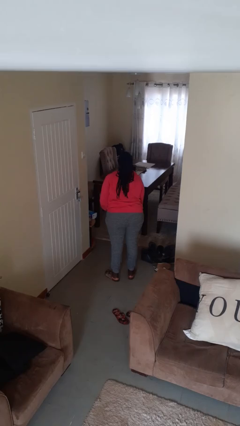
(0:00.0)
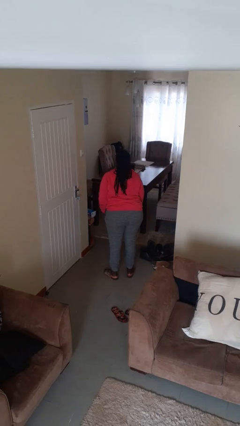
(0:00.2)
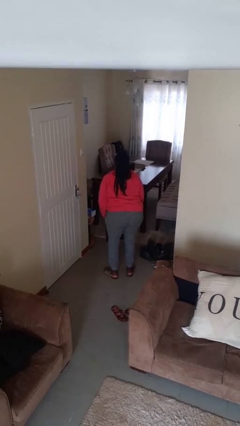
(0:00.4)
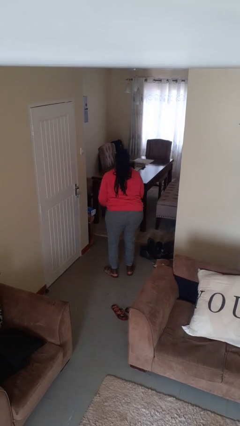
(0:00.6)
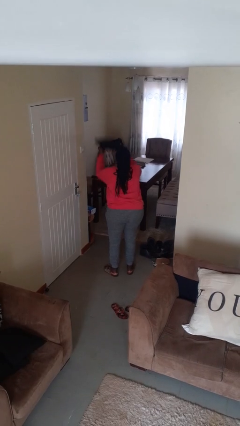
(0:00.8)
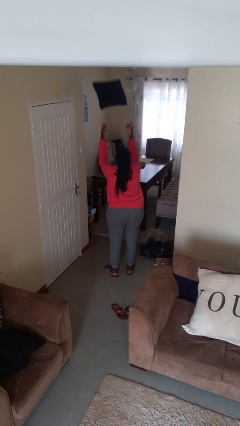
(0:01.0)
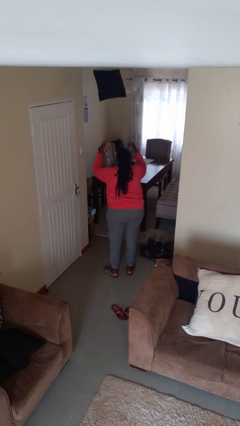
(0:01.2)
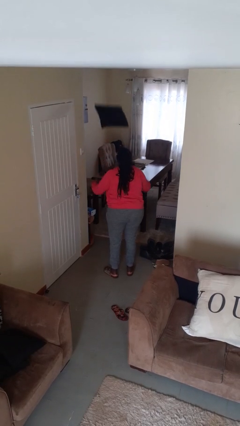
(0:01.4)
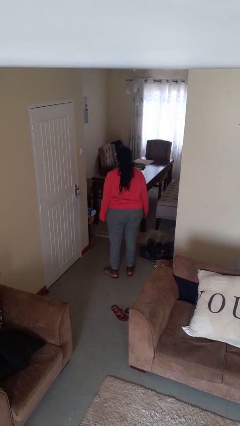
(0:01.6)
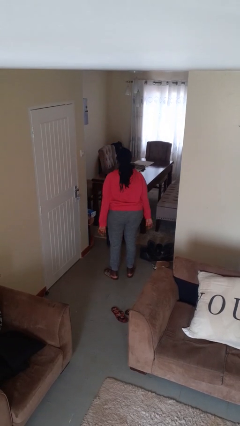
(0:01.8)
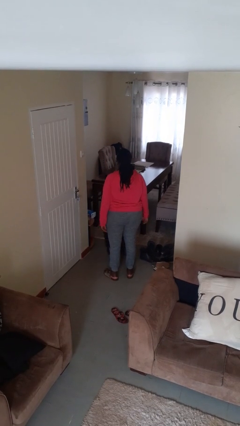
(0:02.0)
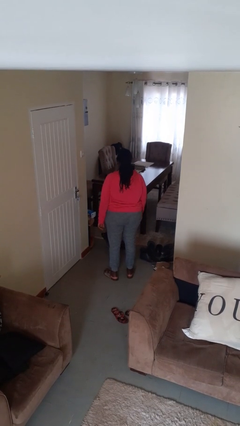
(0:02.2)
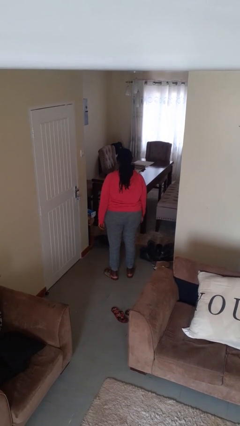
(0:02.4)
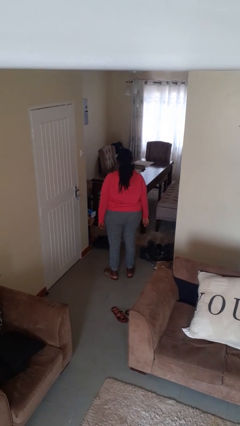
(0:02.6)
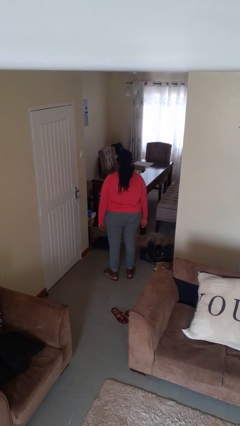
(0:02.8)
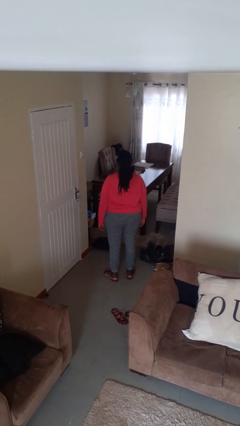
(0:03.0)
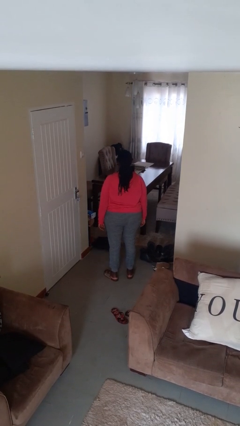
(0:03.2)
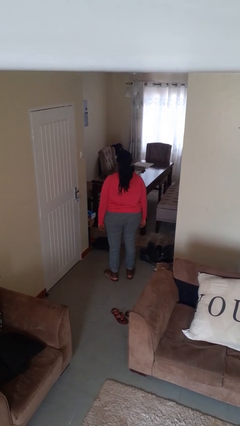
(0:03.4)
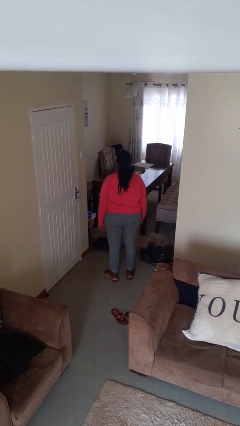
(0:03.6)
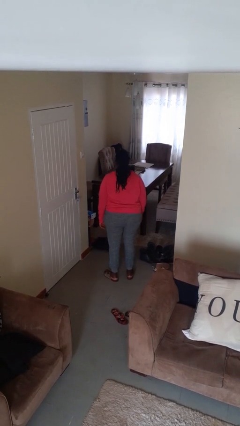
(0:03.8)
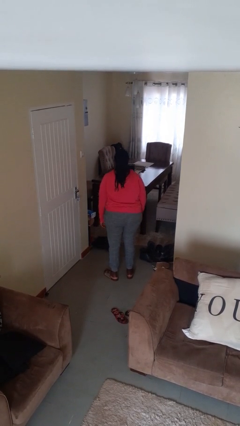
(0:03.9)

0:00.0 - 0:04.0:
person throws object into air

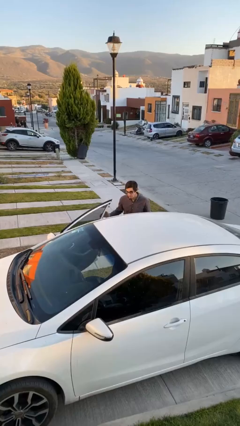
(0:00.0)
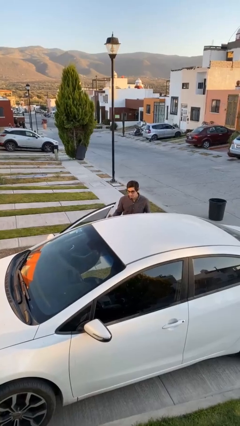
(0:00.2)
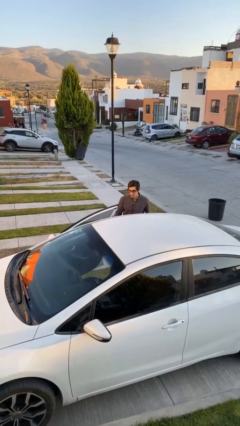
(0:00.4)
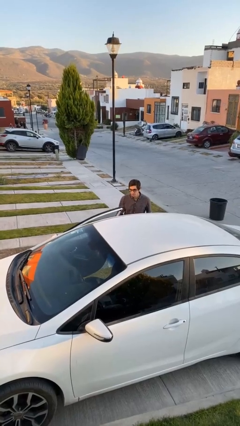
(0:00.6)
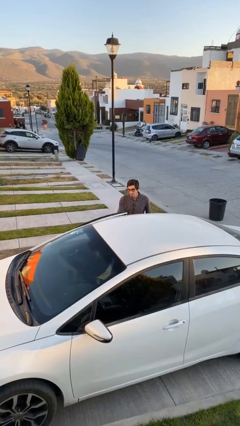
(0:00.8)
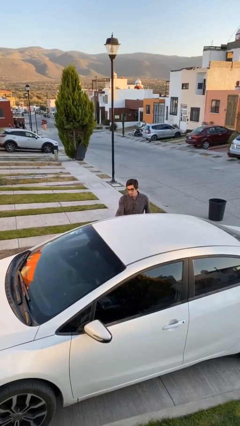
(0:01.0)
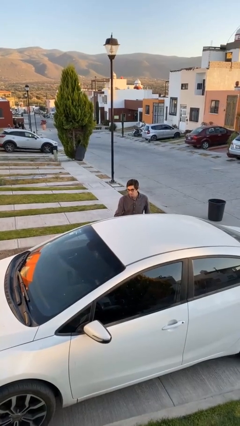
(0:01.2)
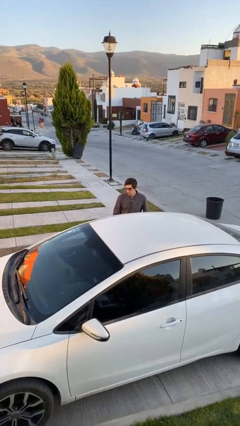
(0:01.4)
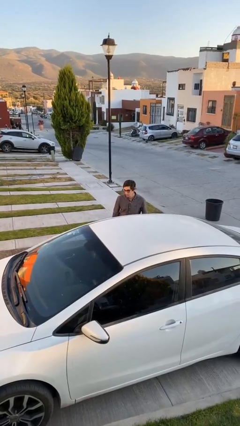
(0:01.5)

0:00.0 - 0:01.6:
person closes car door

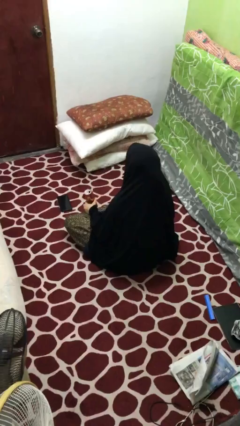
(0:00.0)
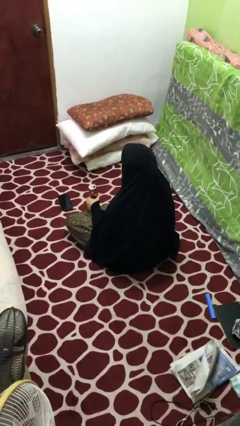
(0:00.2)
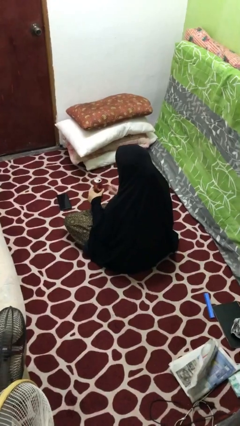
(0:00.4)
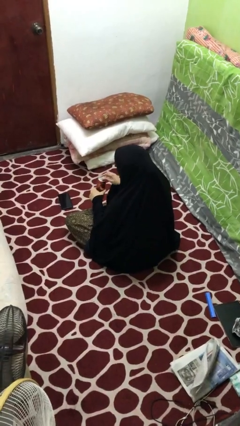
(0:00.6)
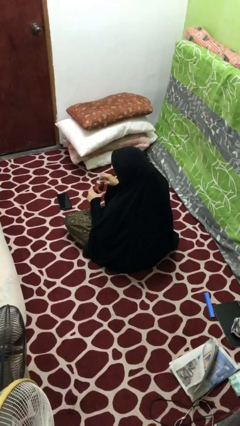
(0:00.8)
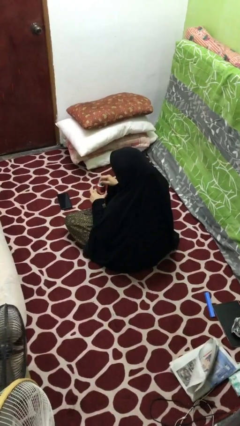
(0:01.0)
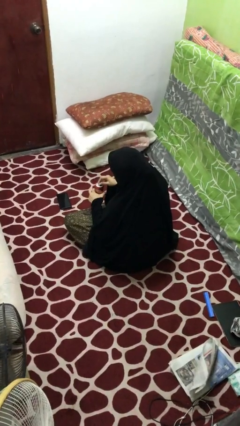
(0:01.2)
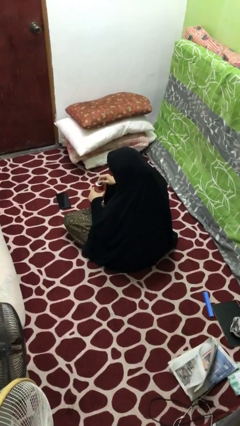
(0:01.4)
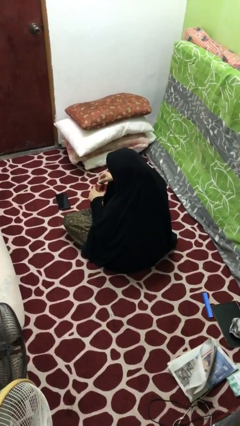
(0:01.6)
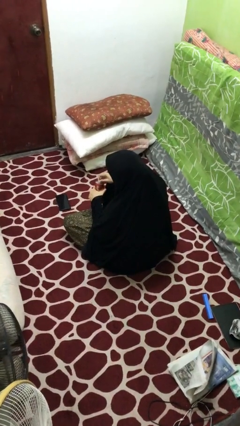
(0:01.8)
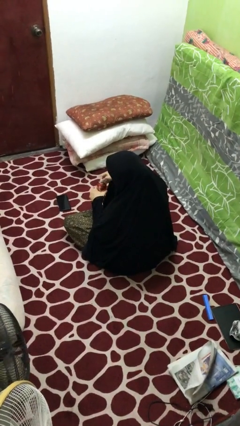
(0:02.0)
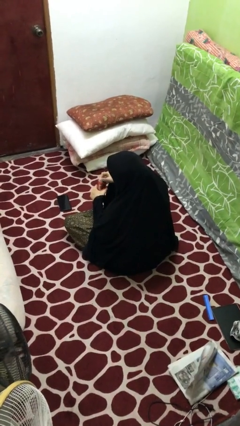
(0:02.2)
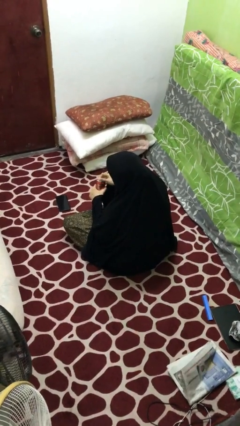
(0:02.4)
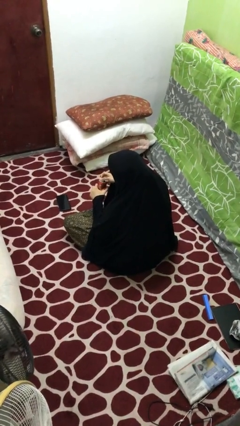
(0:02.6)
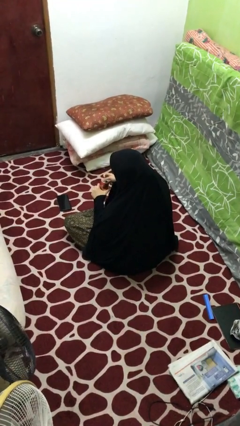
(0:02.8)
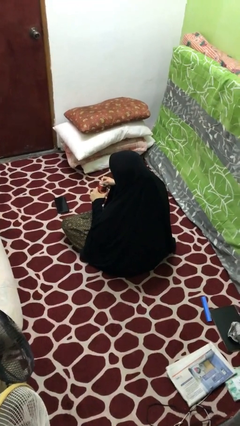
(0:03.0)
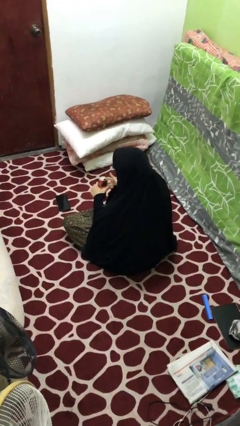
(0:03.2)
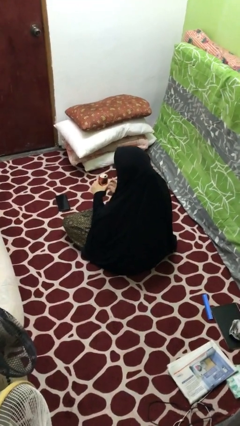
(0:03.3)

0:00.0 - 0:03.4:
person opens beverage can

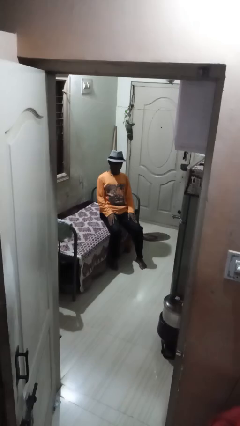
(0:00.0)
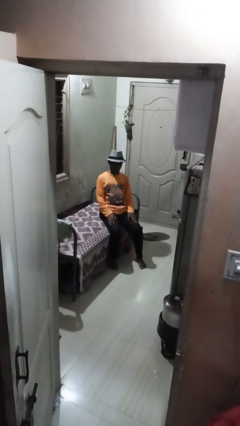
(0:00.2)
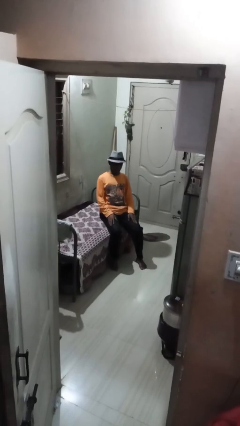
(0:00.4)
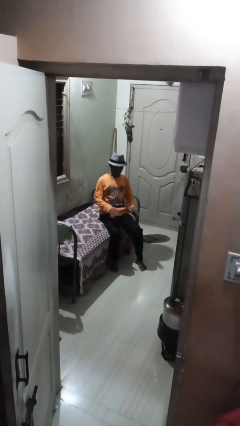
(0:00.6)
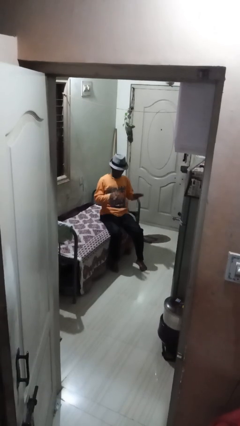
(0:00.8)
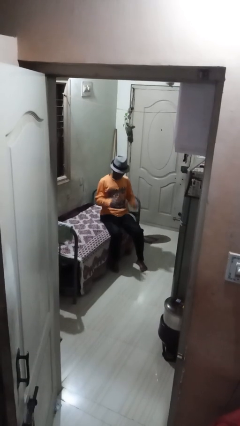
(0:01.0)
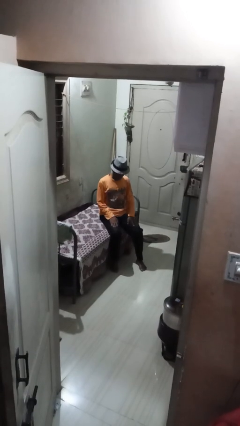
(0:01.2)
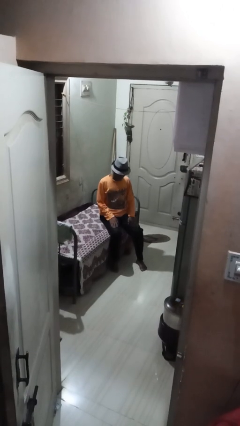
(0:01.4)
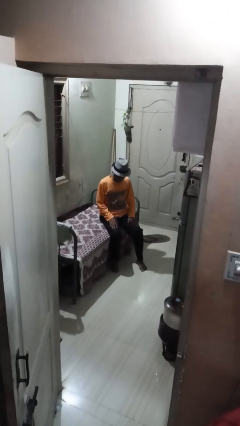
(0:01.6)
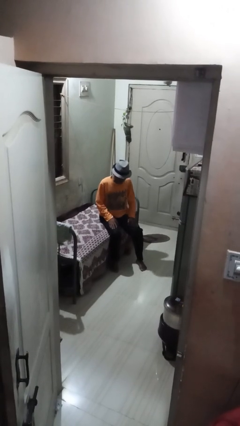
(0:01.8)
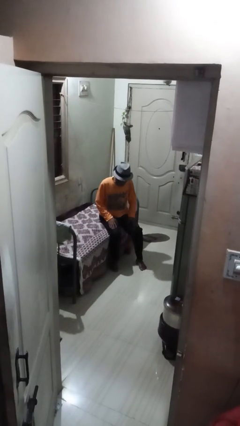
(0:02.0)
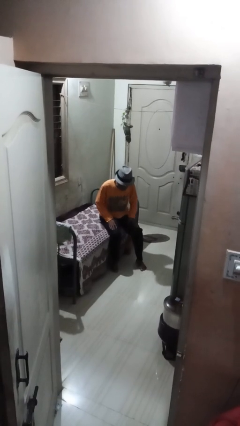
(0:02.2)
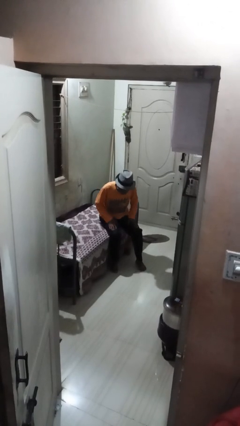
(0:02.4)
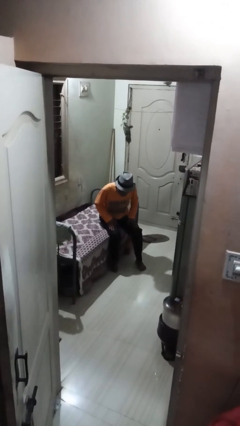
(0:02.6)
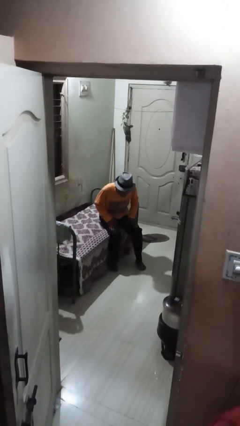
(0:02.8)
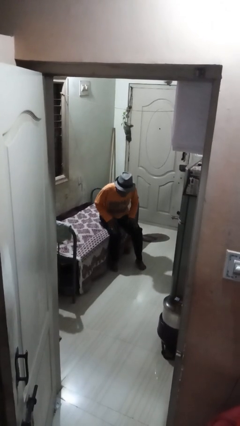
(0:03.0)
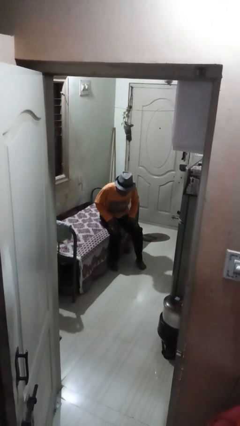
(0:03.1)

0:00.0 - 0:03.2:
person slaps hands on thighs

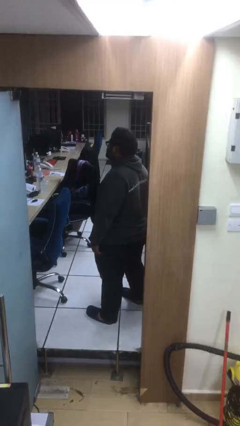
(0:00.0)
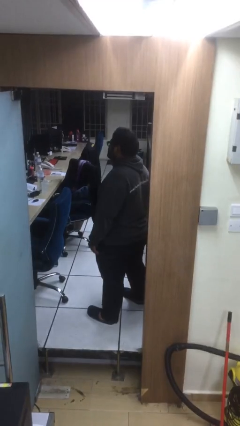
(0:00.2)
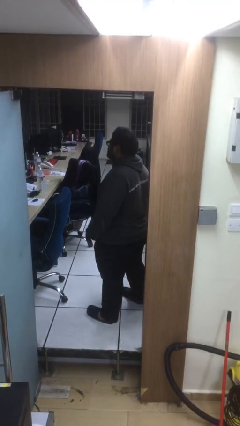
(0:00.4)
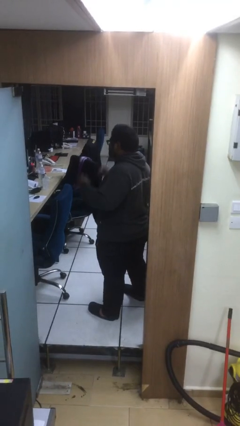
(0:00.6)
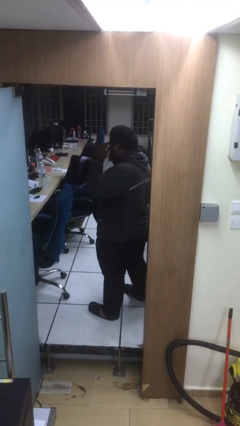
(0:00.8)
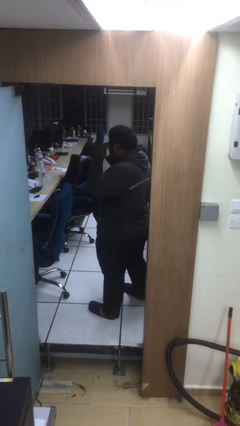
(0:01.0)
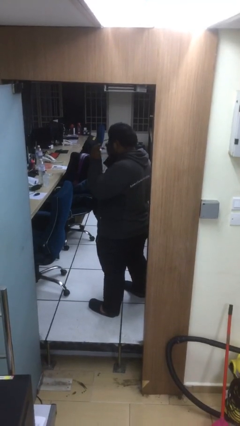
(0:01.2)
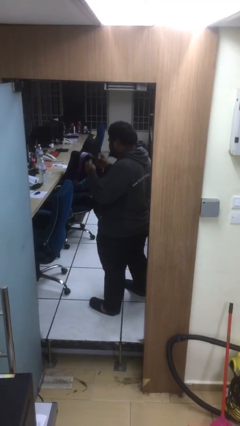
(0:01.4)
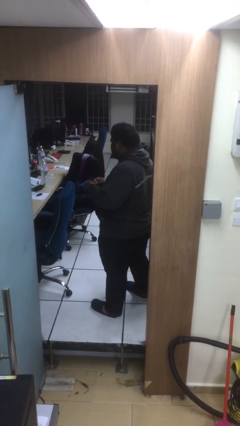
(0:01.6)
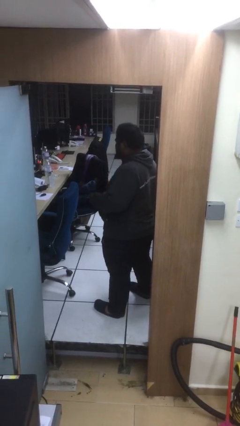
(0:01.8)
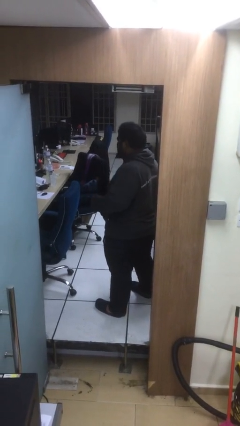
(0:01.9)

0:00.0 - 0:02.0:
person takes off glasses

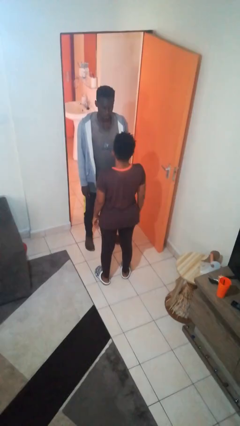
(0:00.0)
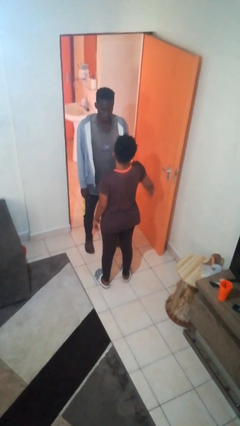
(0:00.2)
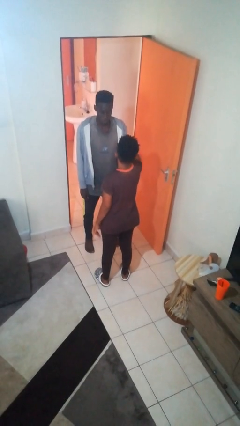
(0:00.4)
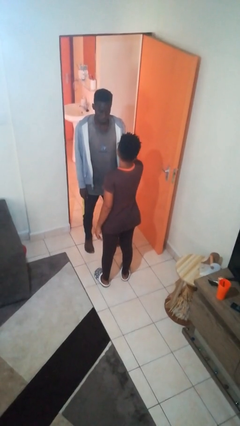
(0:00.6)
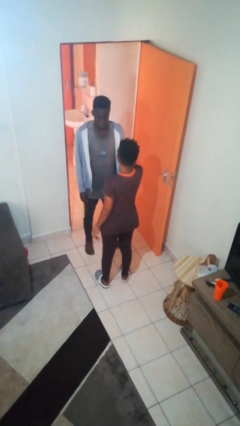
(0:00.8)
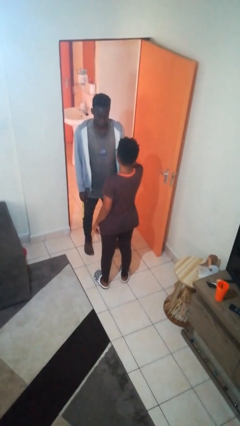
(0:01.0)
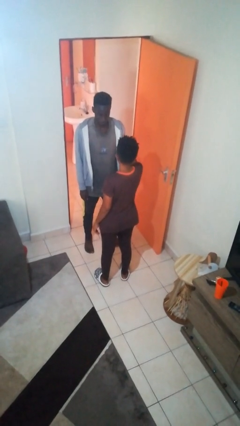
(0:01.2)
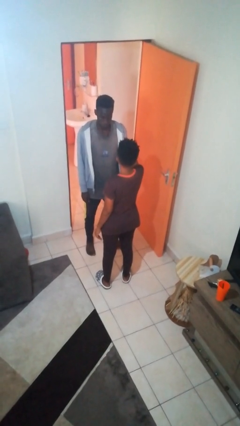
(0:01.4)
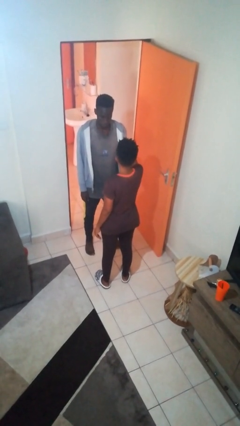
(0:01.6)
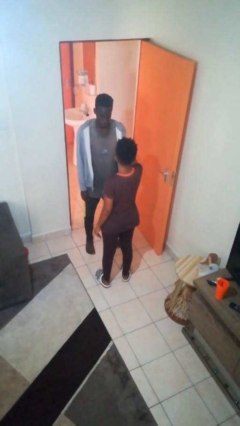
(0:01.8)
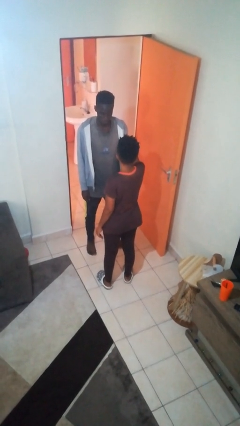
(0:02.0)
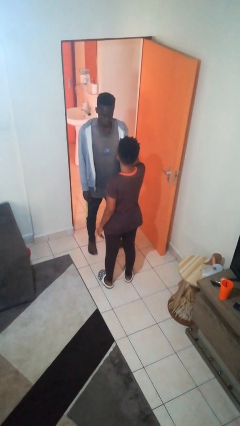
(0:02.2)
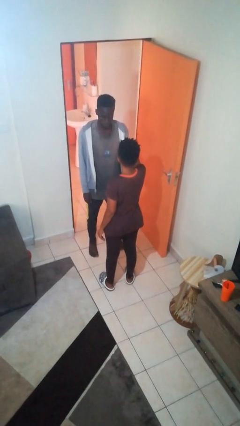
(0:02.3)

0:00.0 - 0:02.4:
person grabs person by bicep

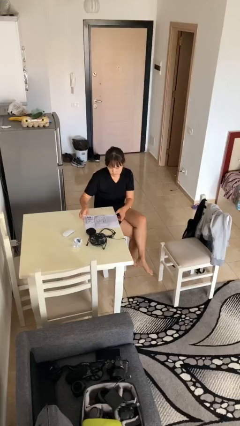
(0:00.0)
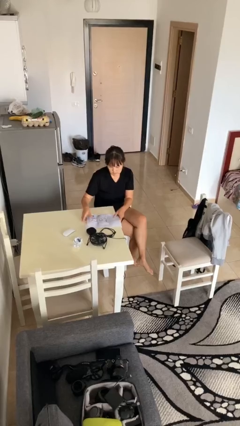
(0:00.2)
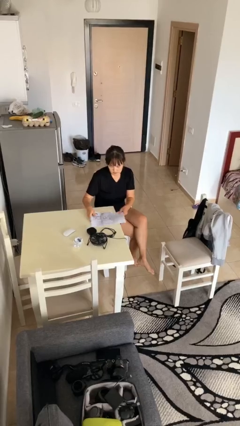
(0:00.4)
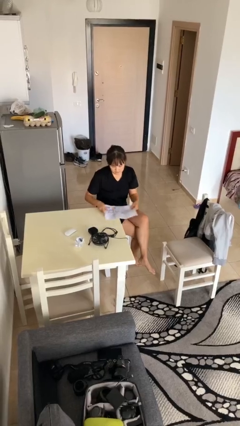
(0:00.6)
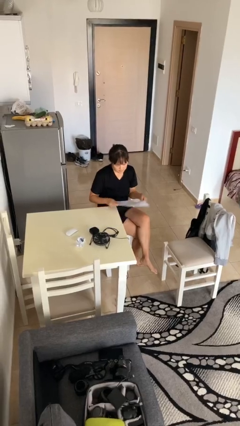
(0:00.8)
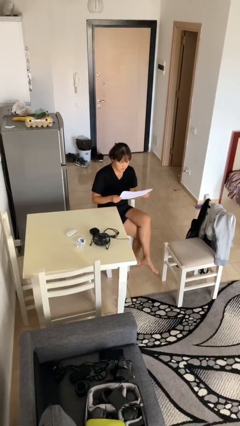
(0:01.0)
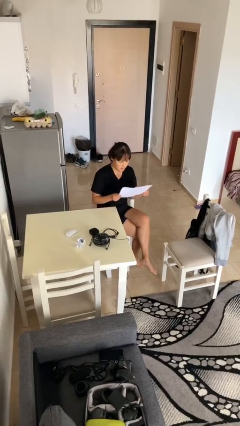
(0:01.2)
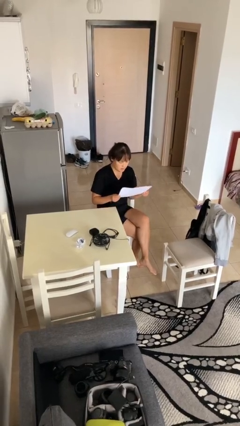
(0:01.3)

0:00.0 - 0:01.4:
person picks up object from table
